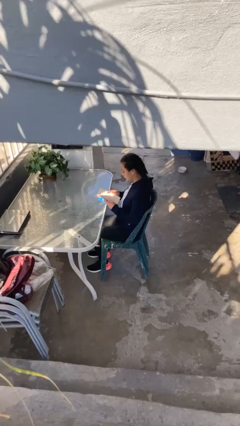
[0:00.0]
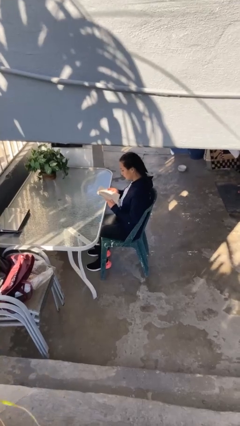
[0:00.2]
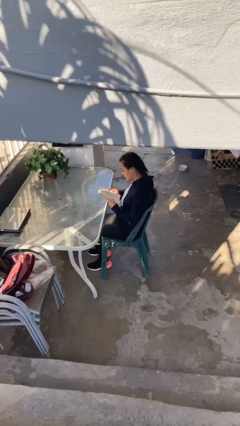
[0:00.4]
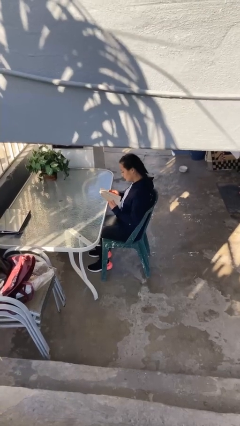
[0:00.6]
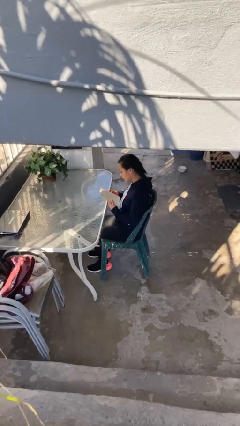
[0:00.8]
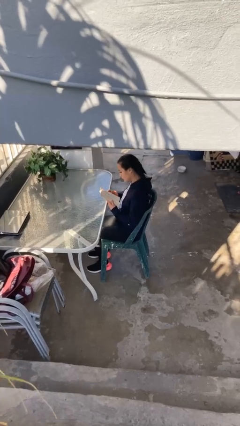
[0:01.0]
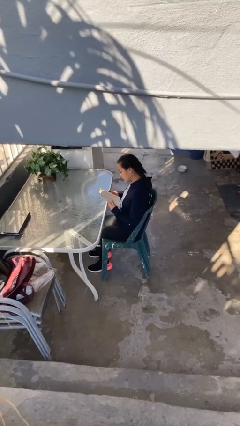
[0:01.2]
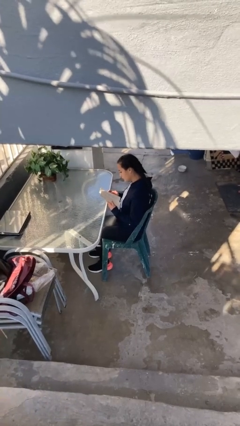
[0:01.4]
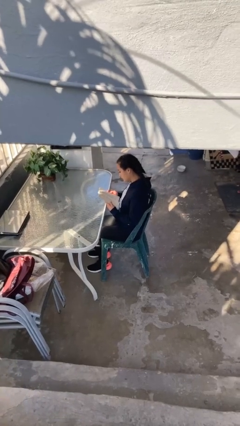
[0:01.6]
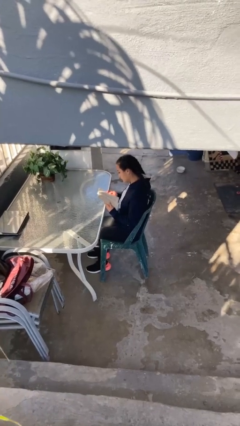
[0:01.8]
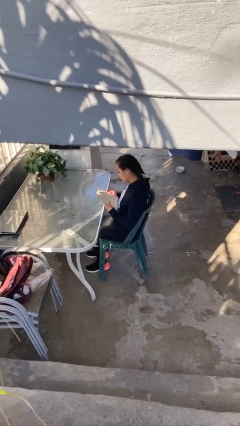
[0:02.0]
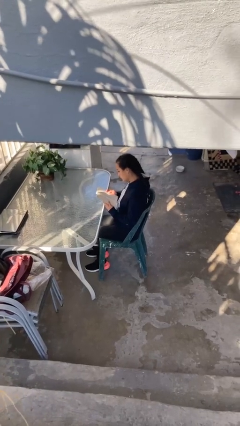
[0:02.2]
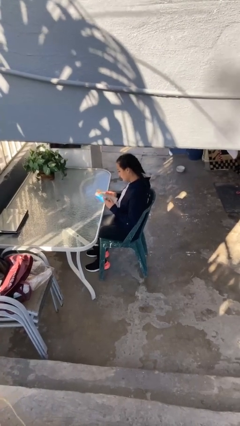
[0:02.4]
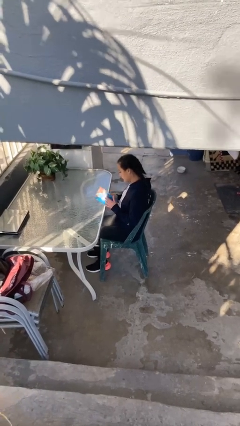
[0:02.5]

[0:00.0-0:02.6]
person reads document

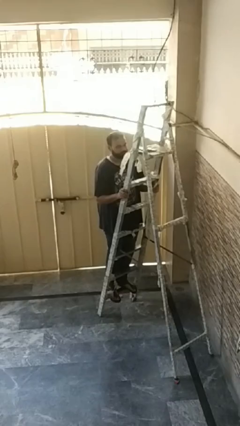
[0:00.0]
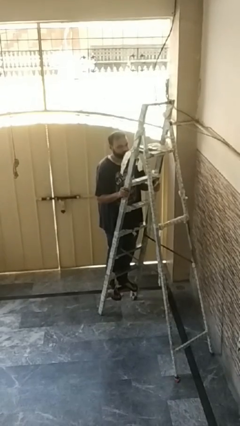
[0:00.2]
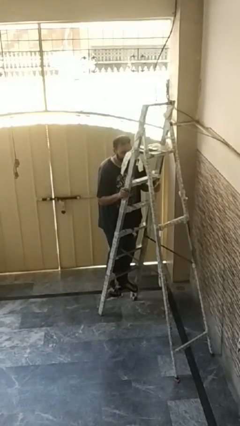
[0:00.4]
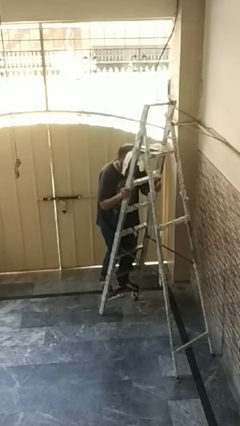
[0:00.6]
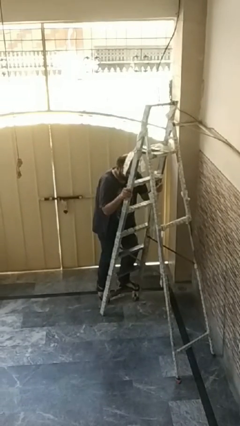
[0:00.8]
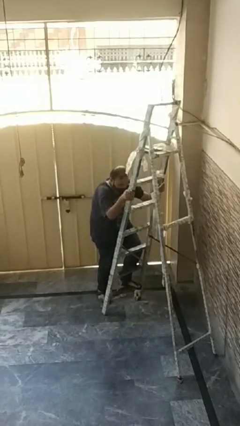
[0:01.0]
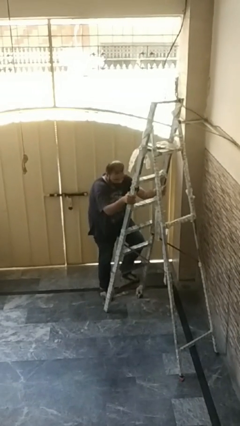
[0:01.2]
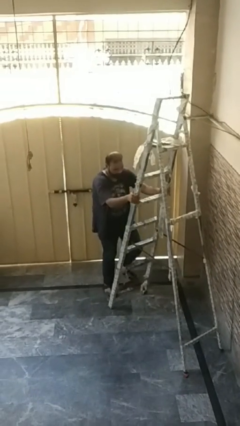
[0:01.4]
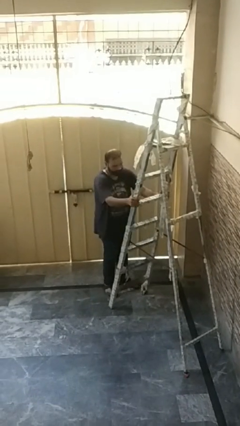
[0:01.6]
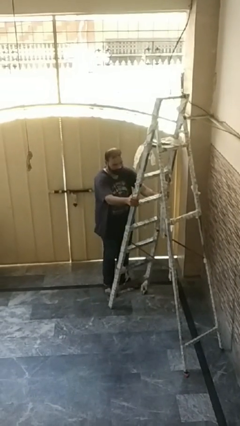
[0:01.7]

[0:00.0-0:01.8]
person climbs down ladder

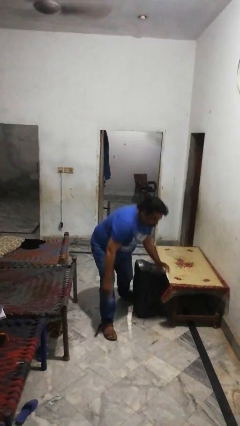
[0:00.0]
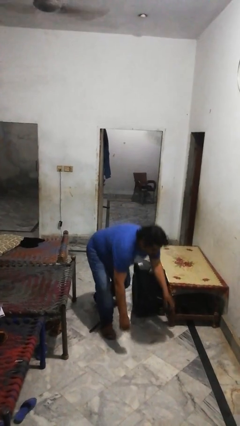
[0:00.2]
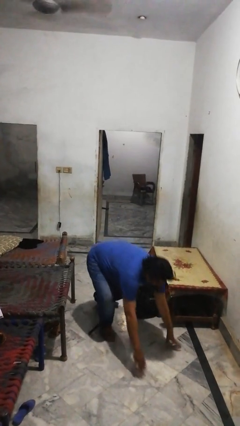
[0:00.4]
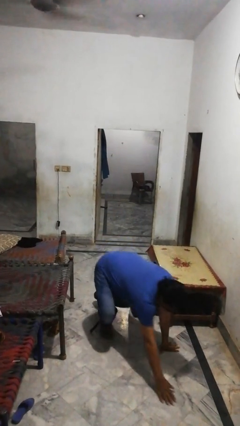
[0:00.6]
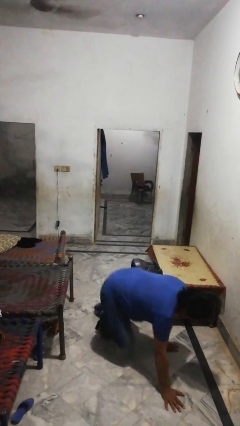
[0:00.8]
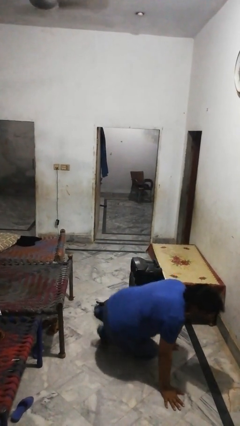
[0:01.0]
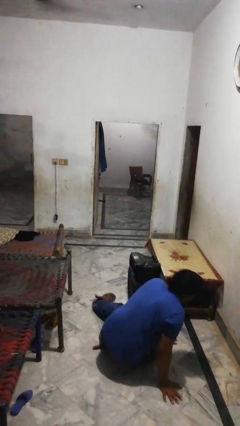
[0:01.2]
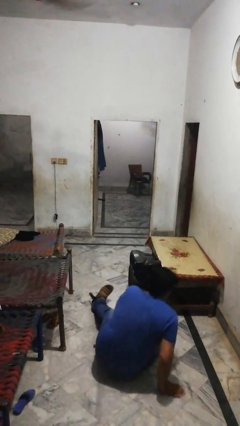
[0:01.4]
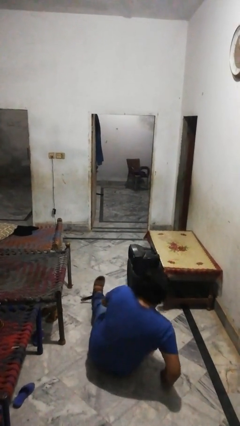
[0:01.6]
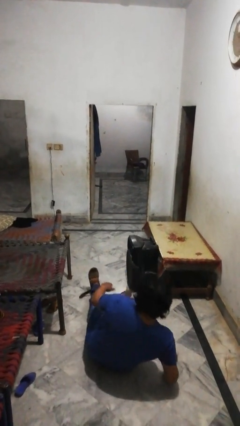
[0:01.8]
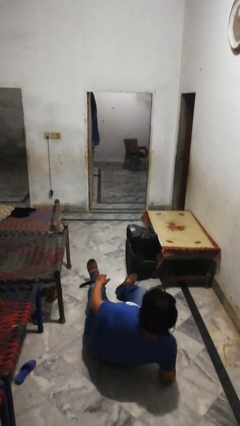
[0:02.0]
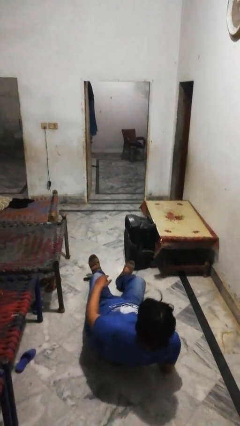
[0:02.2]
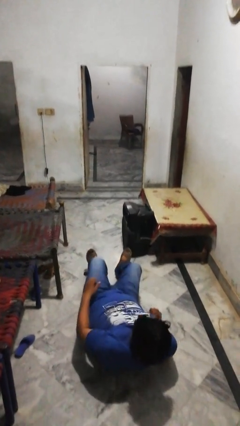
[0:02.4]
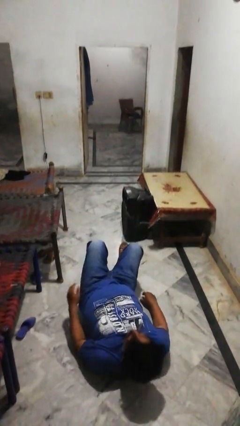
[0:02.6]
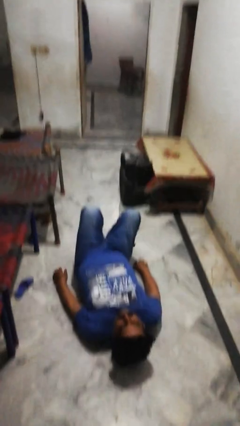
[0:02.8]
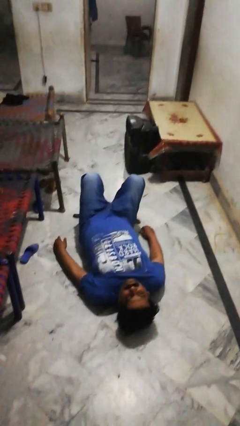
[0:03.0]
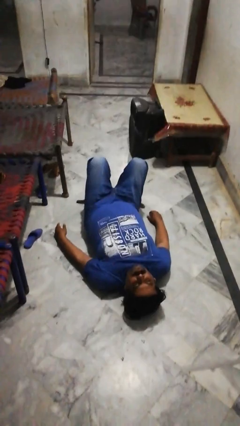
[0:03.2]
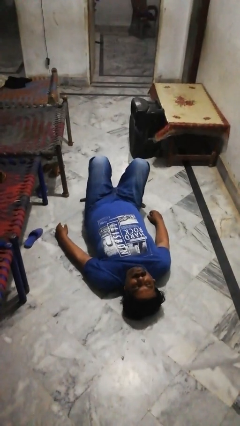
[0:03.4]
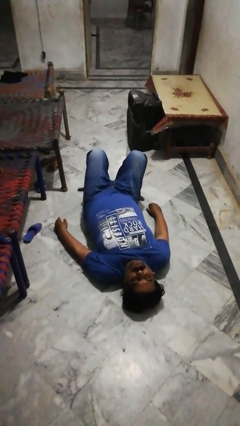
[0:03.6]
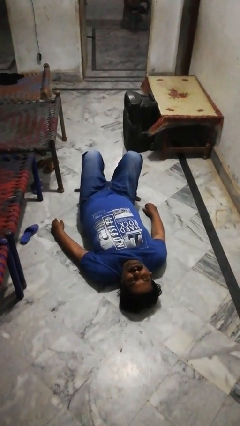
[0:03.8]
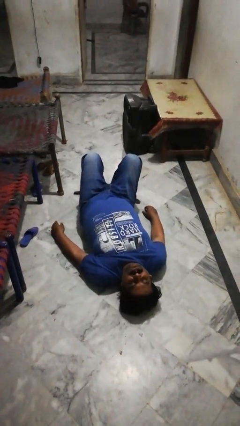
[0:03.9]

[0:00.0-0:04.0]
person lies down on floor

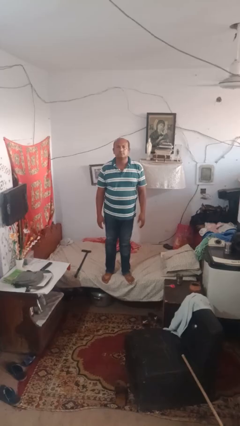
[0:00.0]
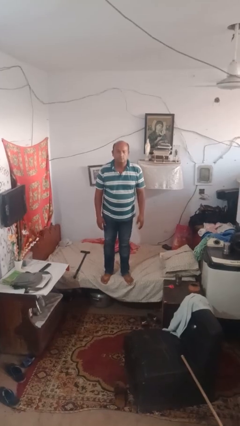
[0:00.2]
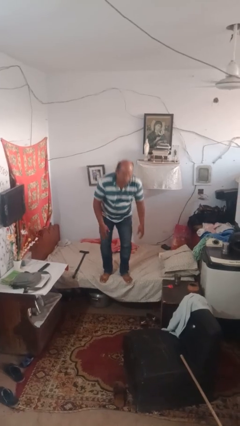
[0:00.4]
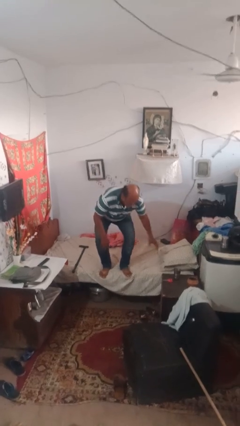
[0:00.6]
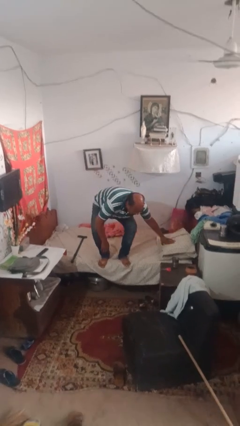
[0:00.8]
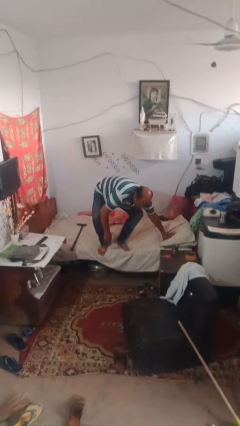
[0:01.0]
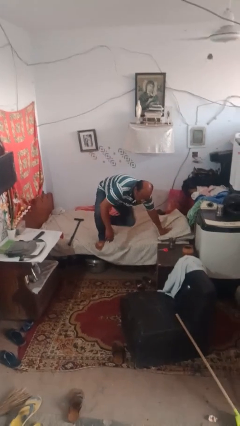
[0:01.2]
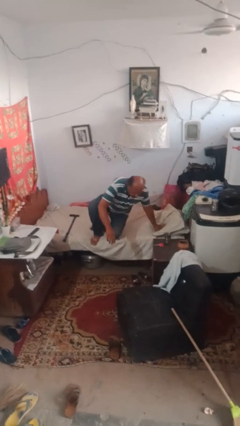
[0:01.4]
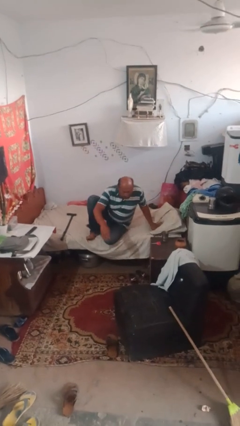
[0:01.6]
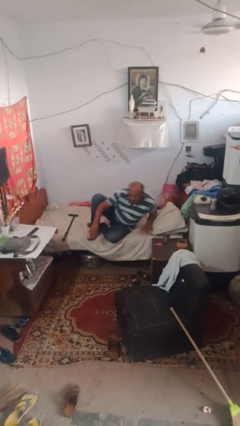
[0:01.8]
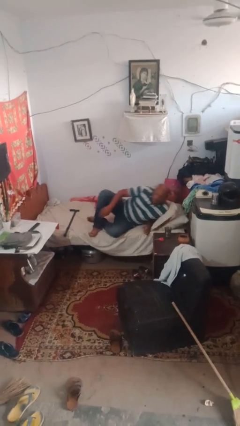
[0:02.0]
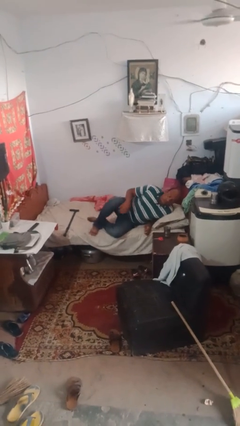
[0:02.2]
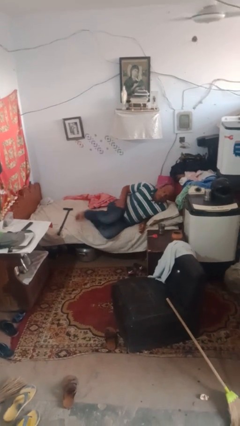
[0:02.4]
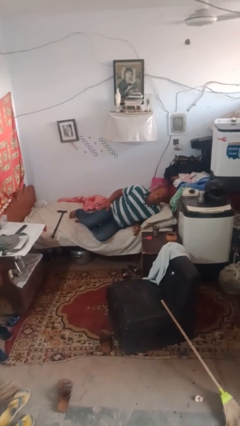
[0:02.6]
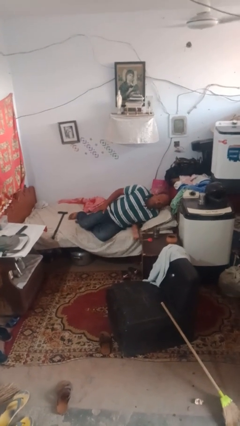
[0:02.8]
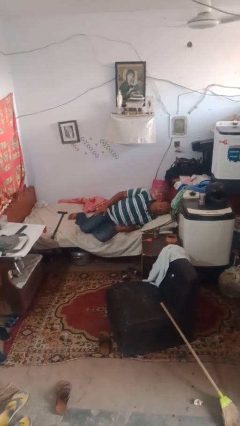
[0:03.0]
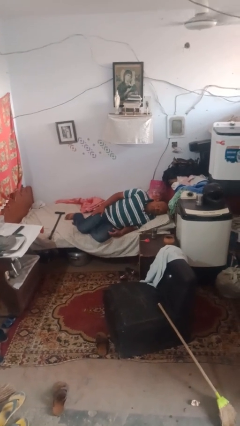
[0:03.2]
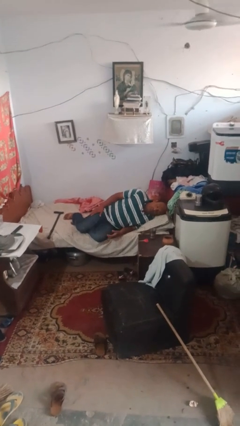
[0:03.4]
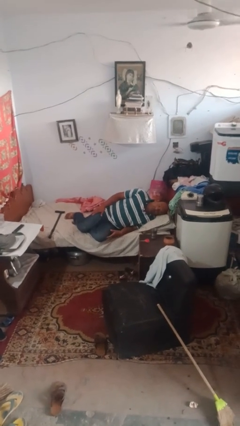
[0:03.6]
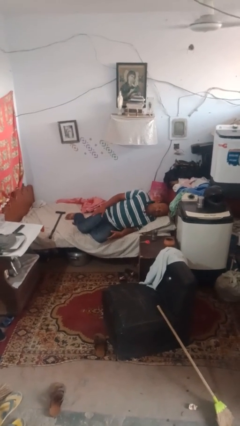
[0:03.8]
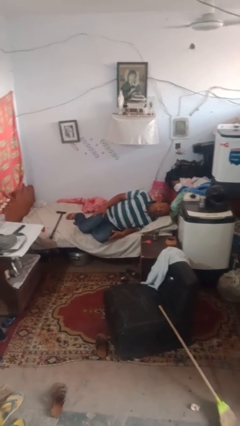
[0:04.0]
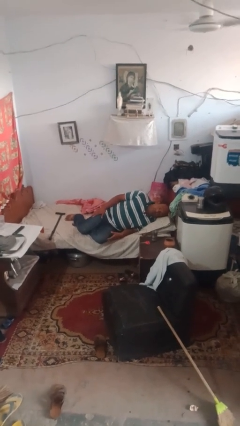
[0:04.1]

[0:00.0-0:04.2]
person lies down on bed

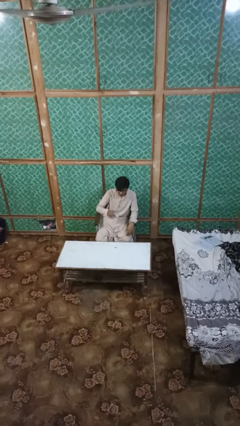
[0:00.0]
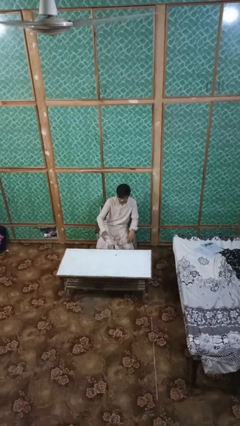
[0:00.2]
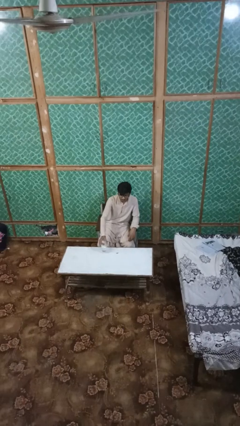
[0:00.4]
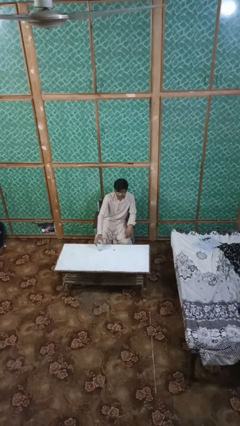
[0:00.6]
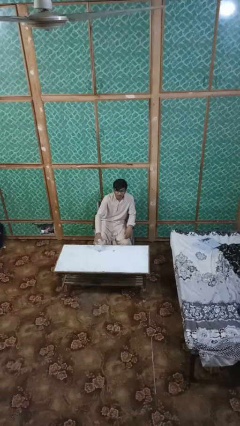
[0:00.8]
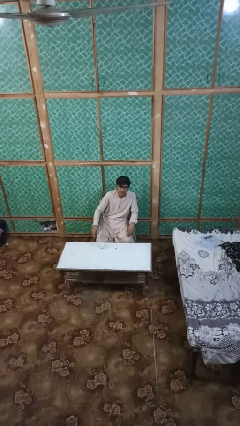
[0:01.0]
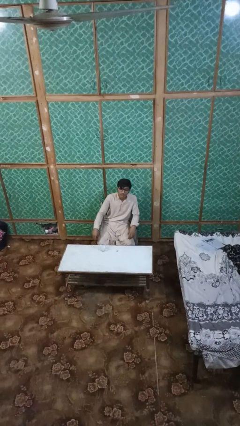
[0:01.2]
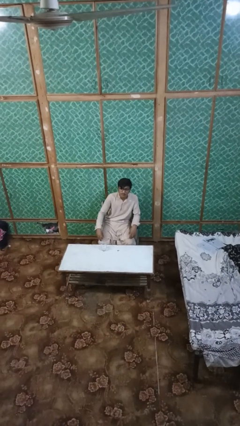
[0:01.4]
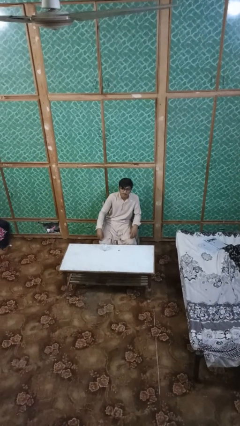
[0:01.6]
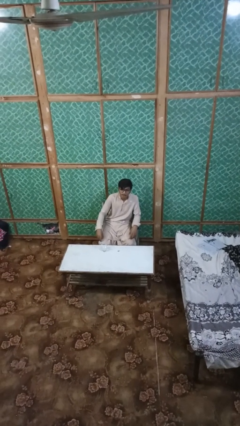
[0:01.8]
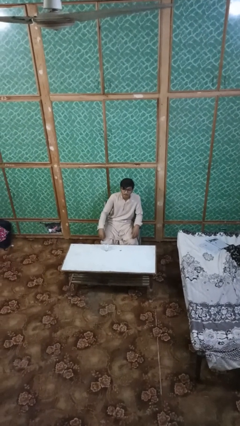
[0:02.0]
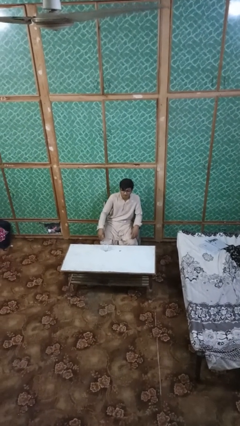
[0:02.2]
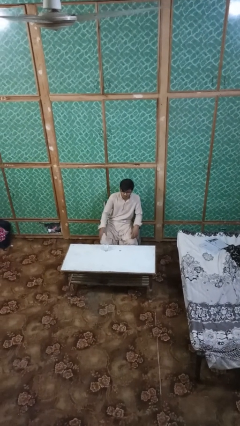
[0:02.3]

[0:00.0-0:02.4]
person puts down object on table

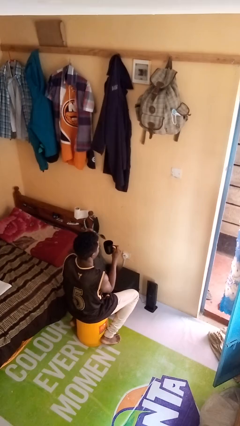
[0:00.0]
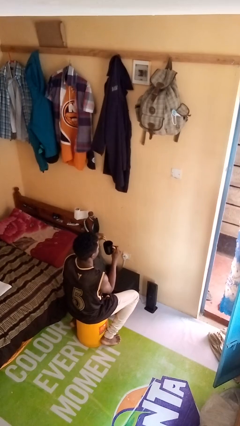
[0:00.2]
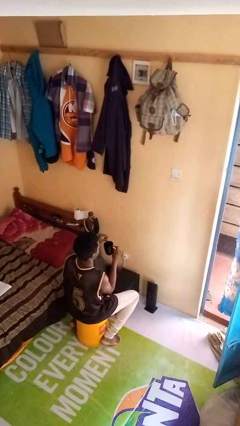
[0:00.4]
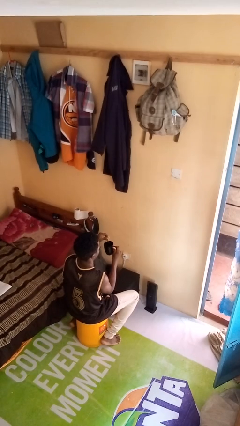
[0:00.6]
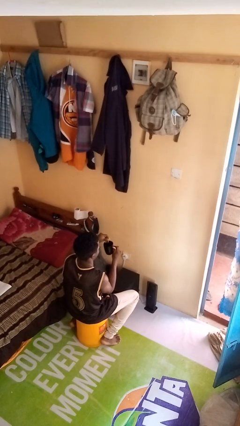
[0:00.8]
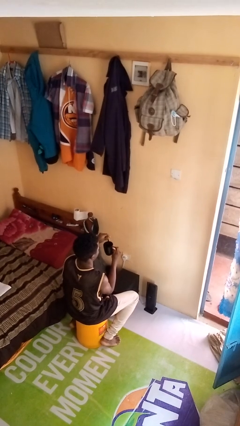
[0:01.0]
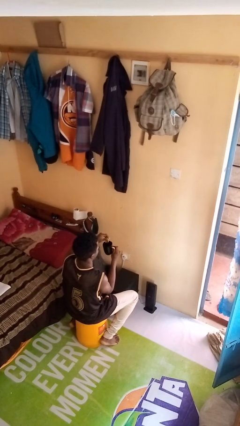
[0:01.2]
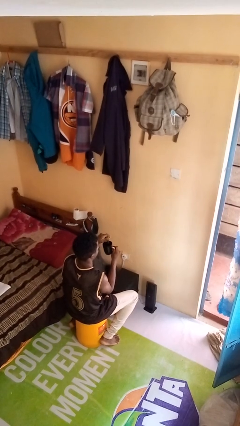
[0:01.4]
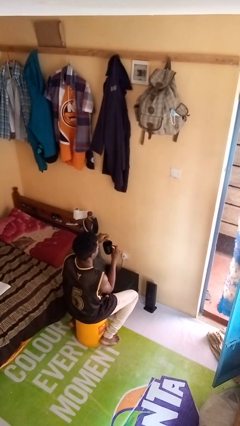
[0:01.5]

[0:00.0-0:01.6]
person stirs mug

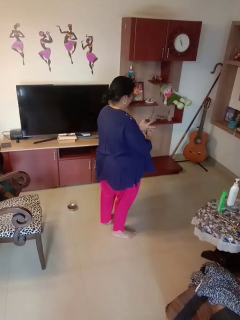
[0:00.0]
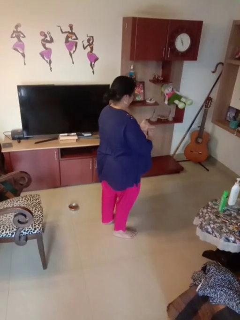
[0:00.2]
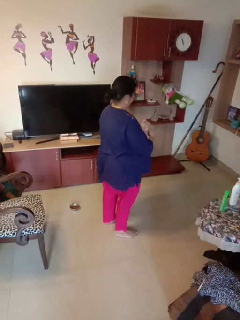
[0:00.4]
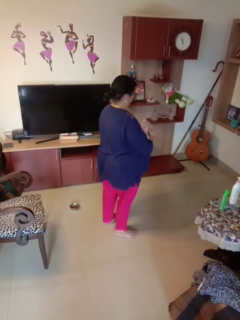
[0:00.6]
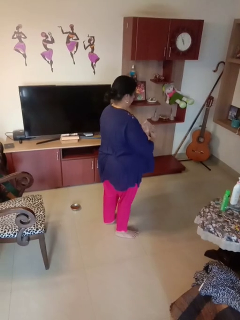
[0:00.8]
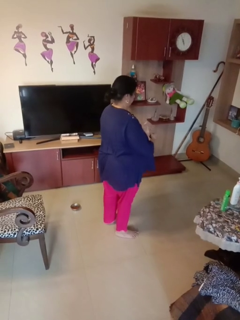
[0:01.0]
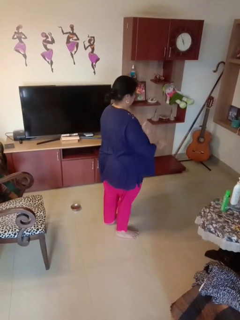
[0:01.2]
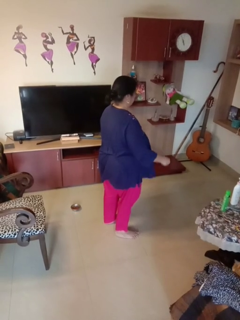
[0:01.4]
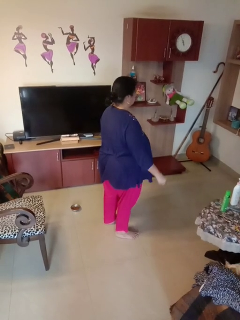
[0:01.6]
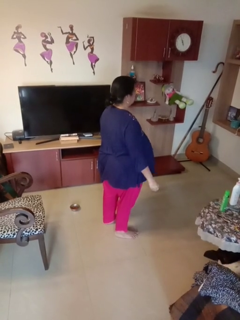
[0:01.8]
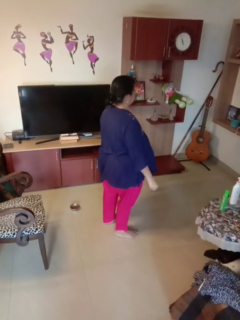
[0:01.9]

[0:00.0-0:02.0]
person takes off ring
